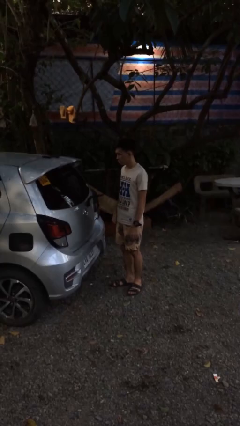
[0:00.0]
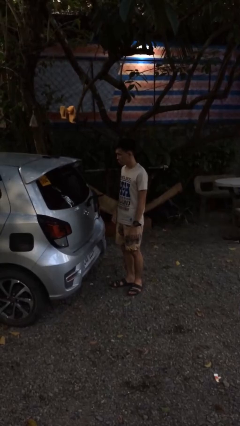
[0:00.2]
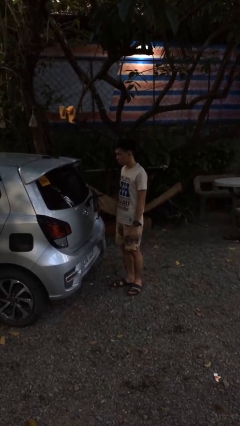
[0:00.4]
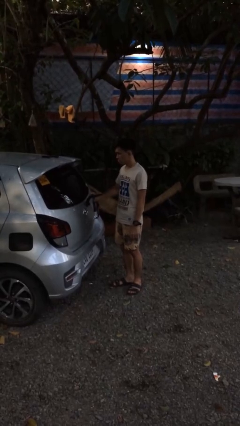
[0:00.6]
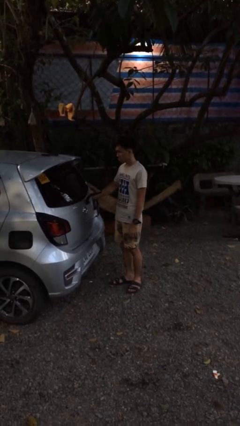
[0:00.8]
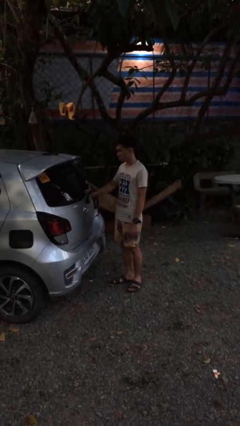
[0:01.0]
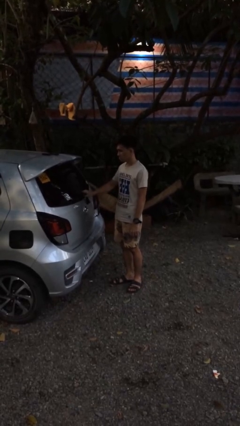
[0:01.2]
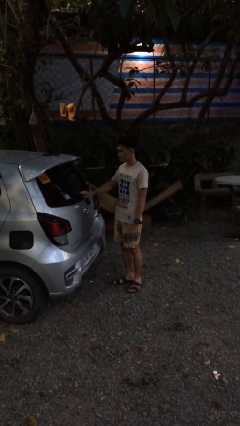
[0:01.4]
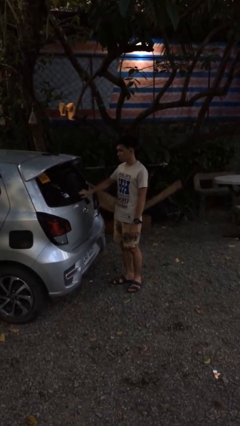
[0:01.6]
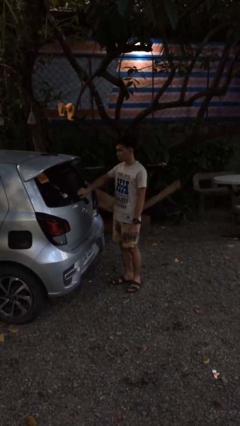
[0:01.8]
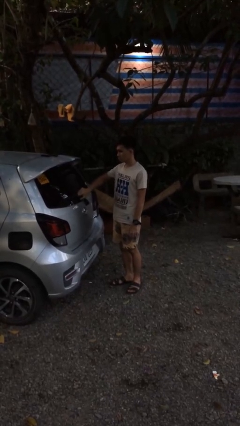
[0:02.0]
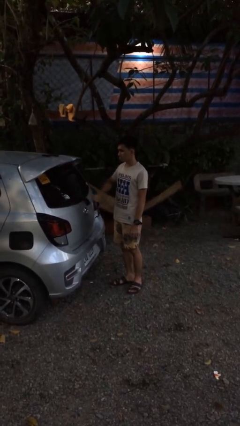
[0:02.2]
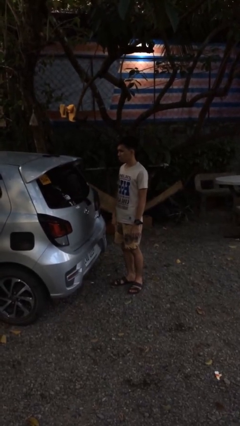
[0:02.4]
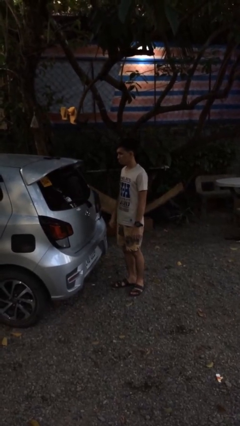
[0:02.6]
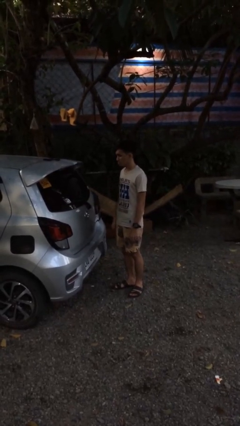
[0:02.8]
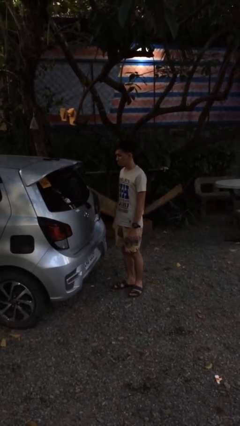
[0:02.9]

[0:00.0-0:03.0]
person flips down car wipers

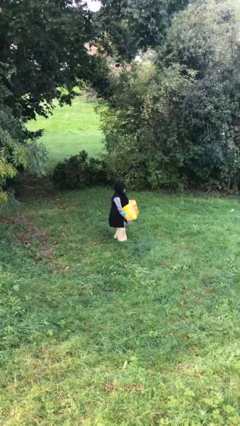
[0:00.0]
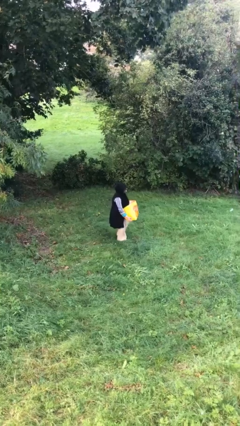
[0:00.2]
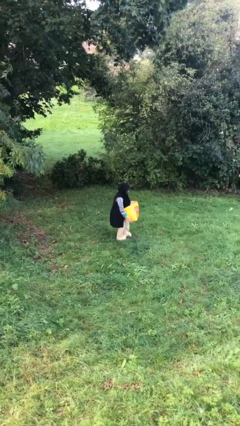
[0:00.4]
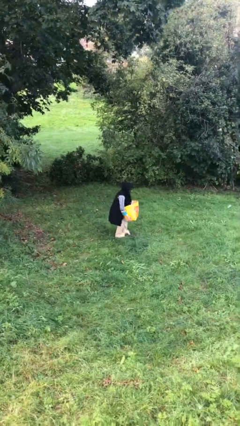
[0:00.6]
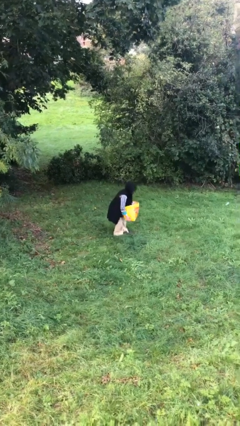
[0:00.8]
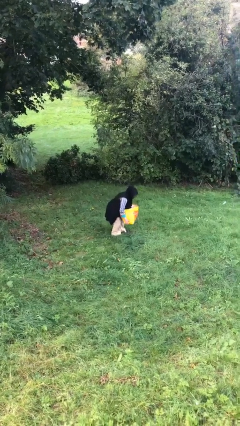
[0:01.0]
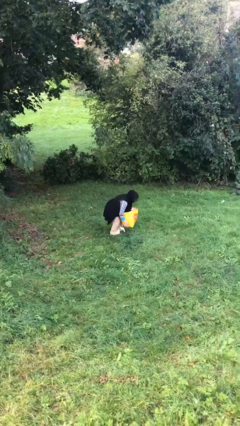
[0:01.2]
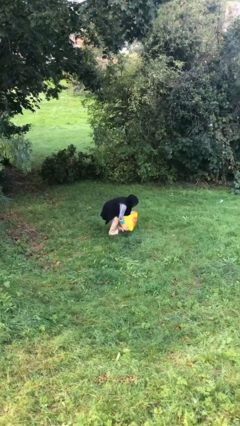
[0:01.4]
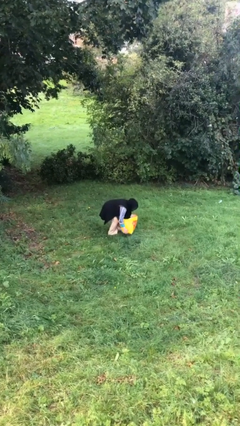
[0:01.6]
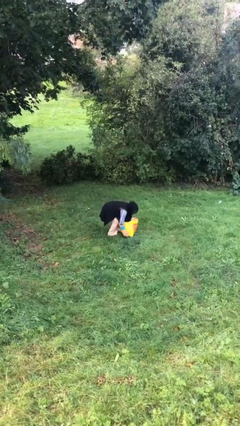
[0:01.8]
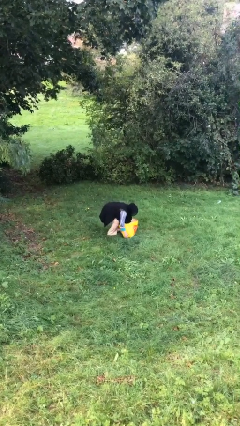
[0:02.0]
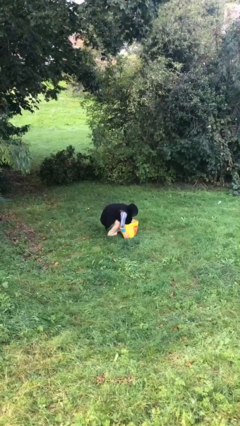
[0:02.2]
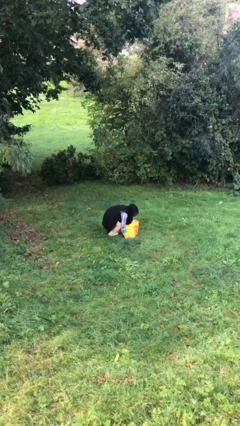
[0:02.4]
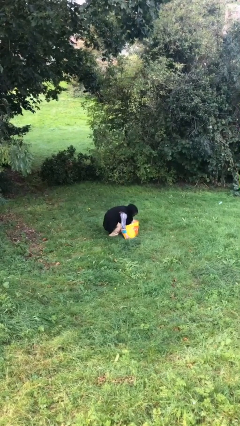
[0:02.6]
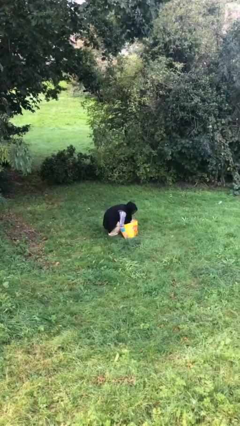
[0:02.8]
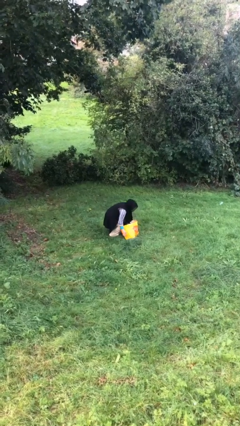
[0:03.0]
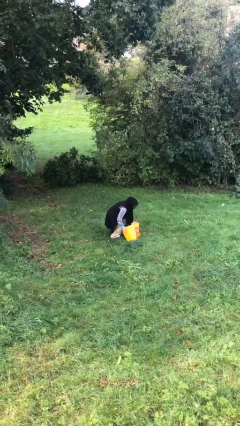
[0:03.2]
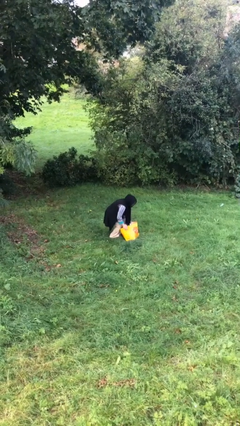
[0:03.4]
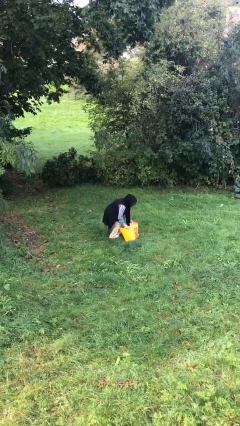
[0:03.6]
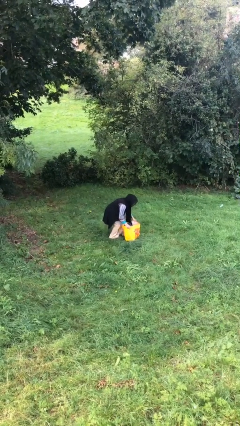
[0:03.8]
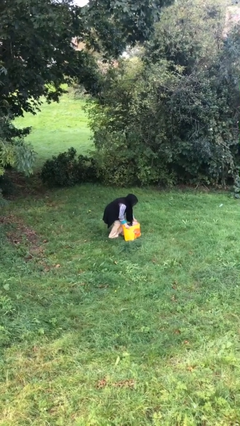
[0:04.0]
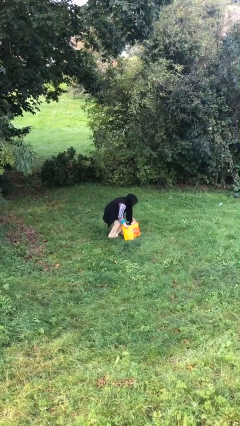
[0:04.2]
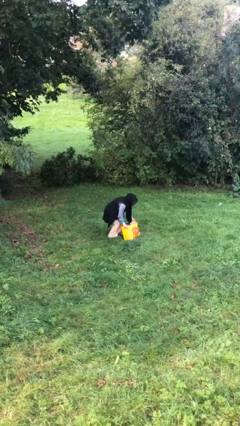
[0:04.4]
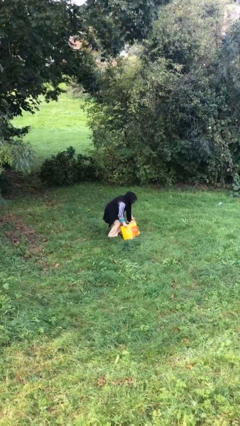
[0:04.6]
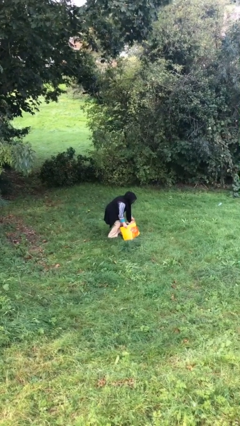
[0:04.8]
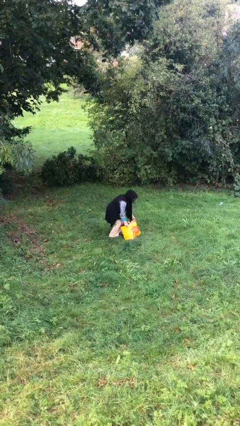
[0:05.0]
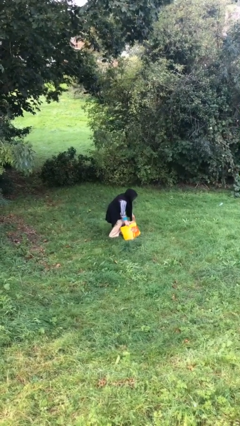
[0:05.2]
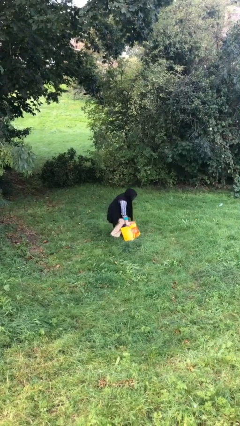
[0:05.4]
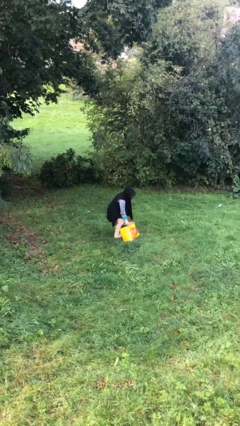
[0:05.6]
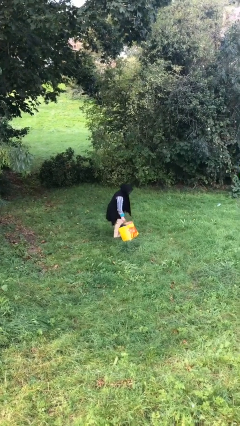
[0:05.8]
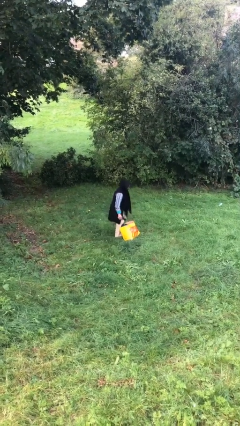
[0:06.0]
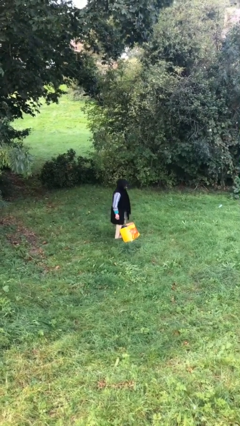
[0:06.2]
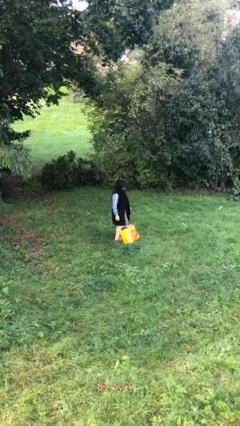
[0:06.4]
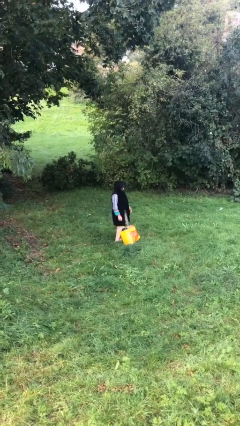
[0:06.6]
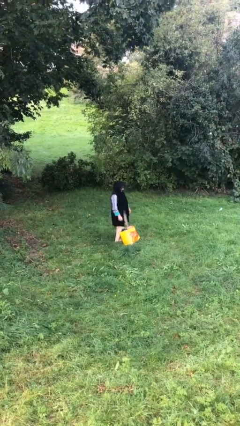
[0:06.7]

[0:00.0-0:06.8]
person puts down object on floor

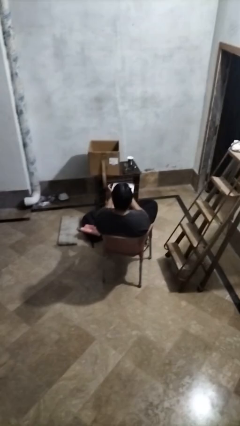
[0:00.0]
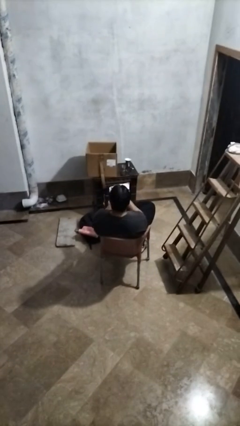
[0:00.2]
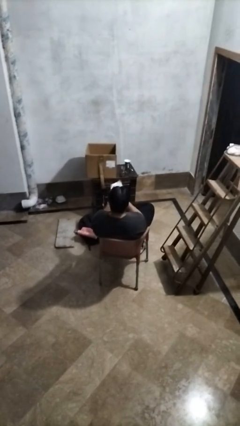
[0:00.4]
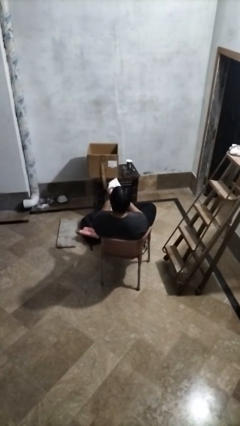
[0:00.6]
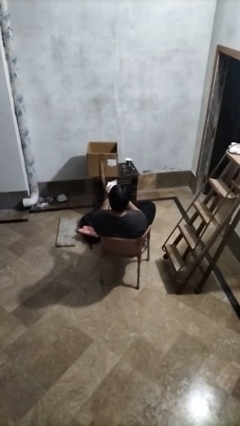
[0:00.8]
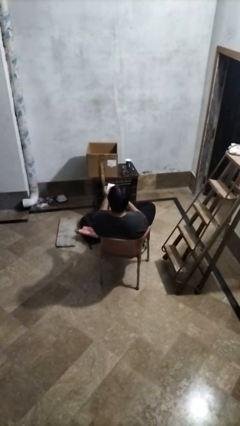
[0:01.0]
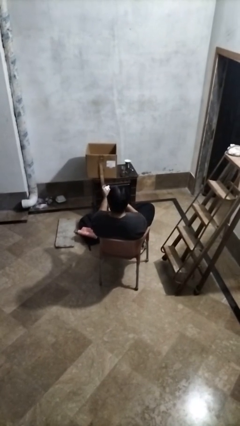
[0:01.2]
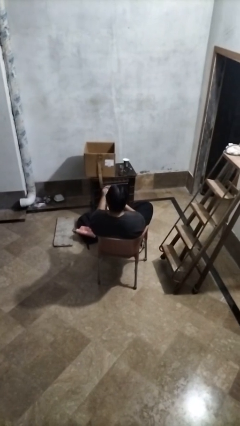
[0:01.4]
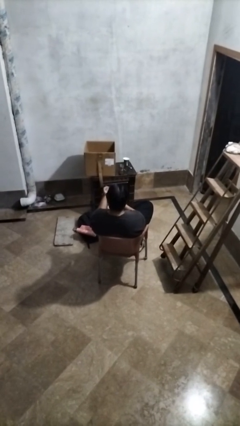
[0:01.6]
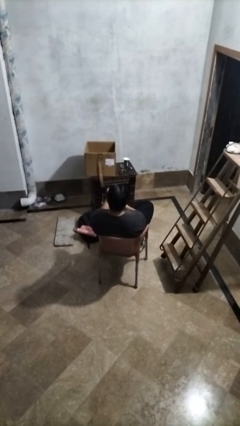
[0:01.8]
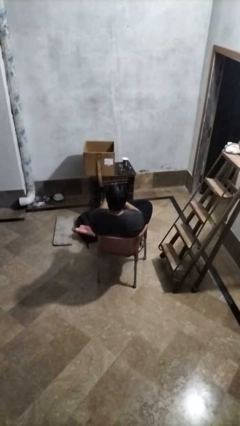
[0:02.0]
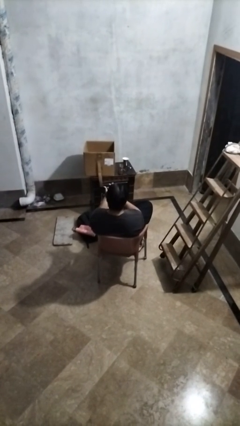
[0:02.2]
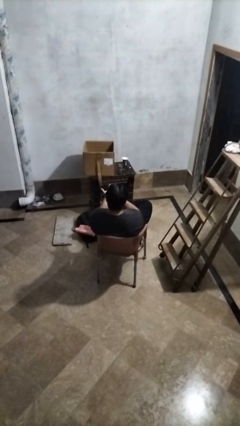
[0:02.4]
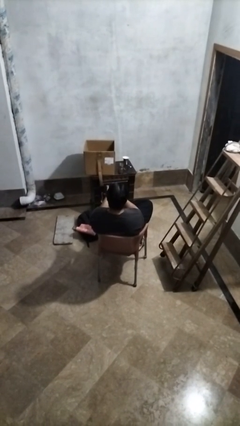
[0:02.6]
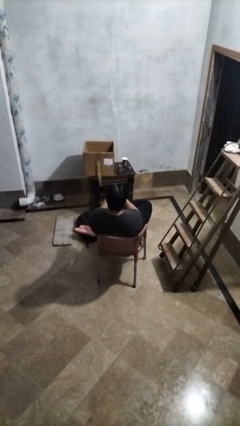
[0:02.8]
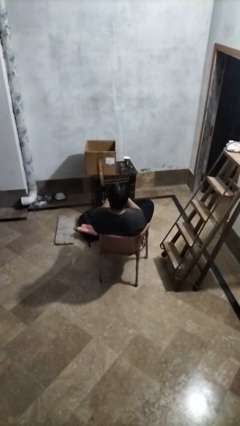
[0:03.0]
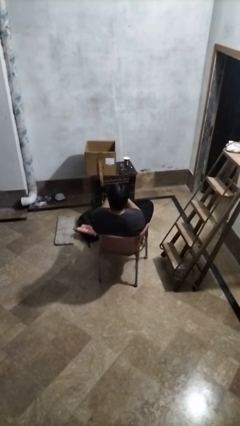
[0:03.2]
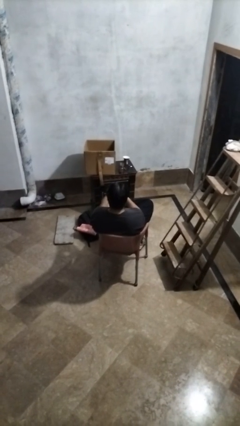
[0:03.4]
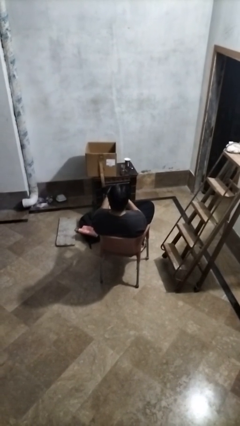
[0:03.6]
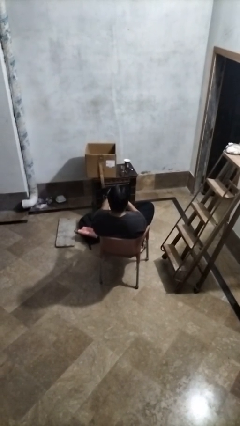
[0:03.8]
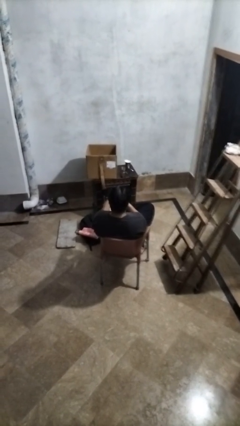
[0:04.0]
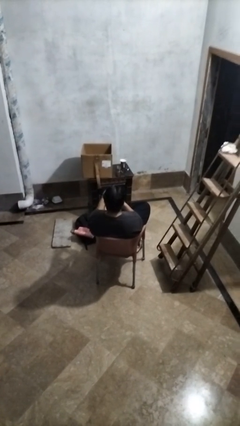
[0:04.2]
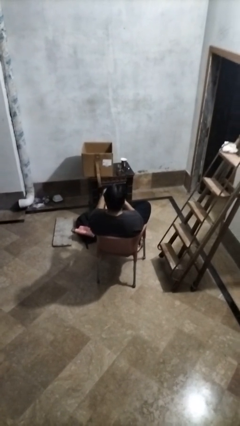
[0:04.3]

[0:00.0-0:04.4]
person crumples paper

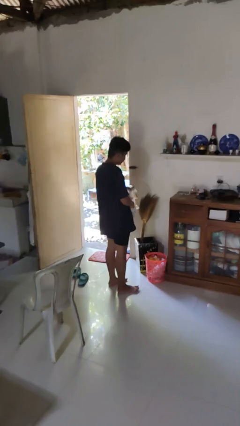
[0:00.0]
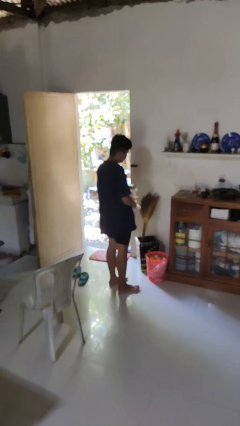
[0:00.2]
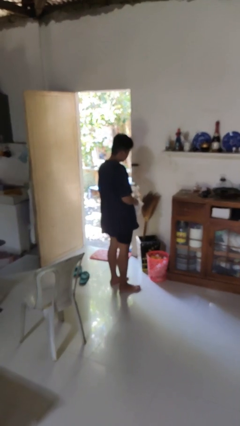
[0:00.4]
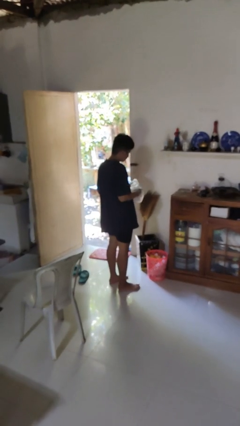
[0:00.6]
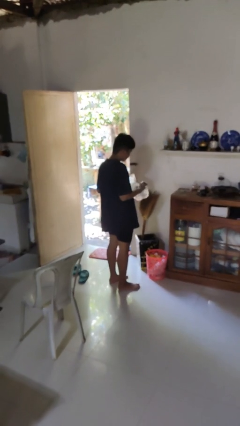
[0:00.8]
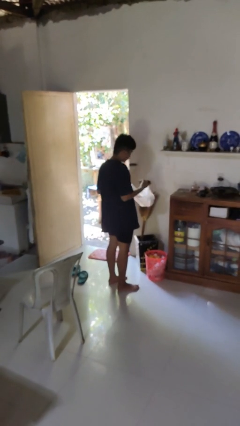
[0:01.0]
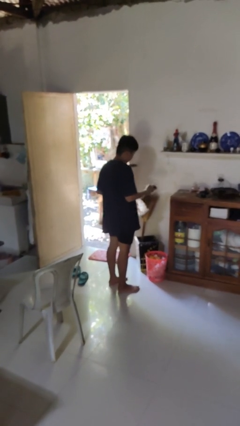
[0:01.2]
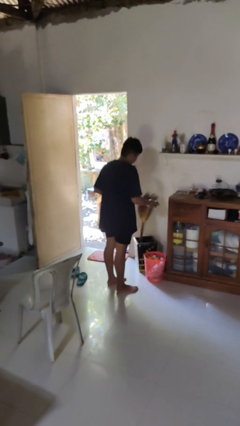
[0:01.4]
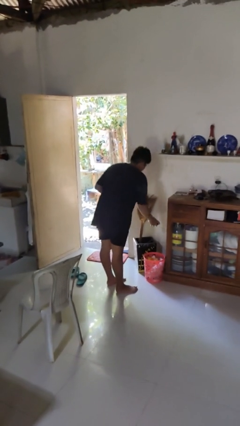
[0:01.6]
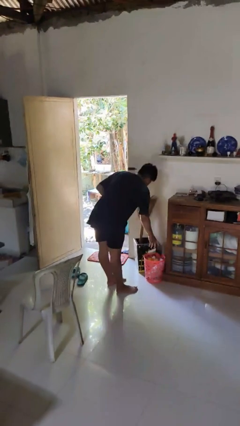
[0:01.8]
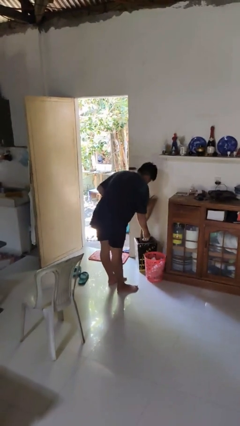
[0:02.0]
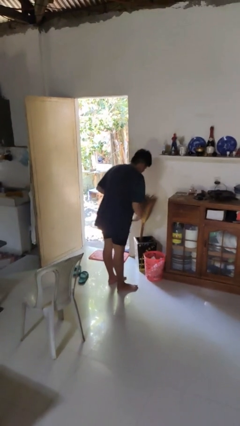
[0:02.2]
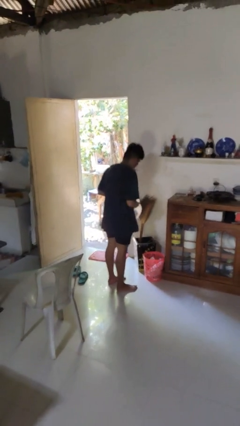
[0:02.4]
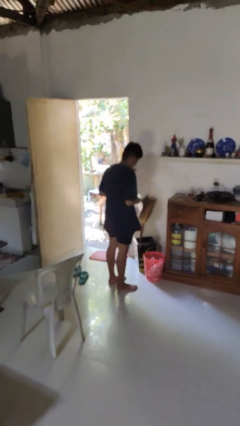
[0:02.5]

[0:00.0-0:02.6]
person discards trash

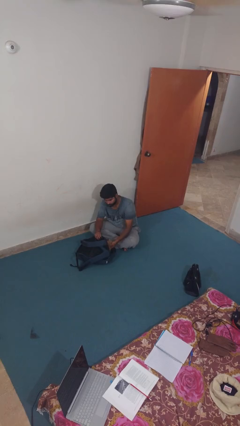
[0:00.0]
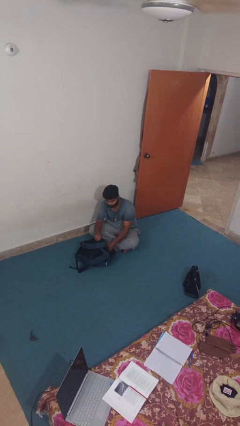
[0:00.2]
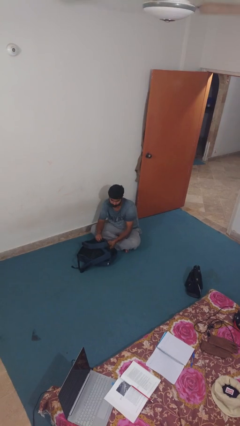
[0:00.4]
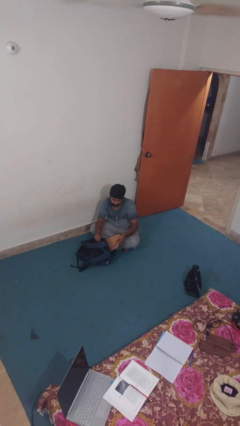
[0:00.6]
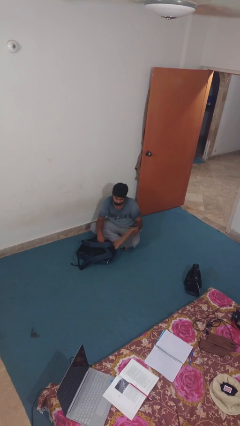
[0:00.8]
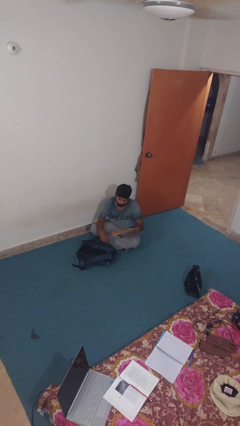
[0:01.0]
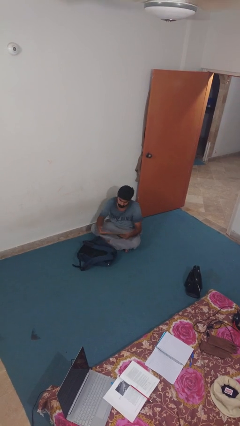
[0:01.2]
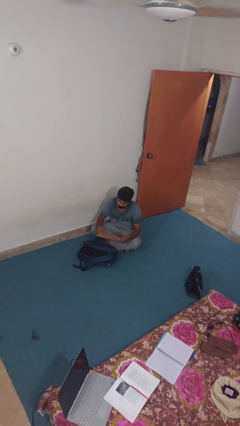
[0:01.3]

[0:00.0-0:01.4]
person takes object from backpack
